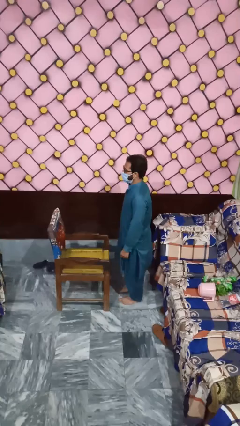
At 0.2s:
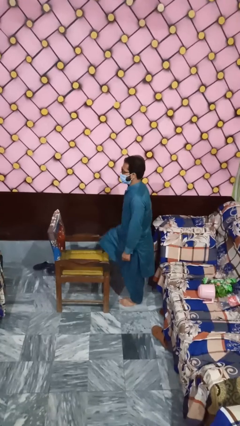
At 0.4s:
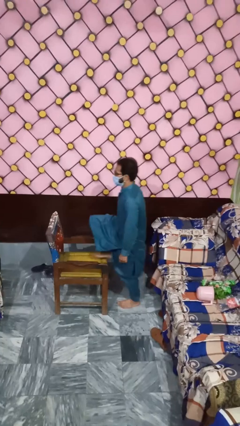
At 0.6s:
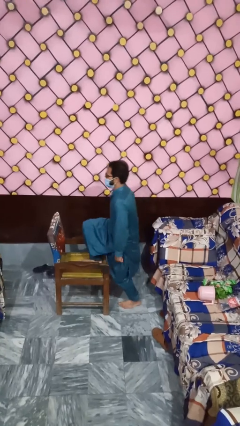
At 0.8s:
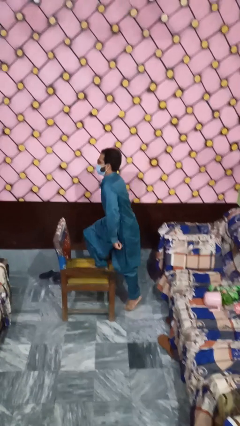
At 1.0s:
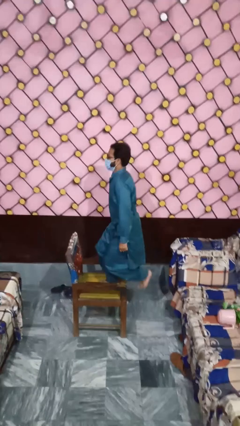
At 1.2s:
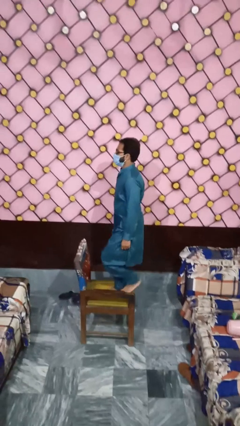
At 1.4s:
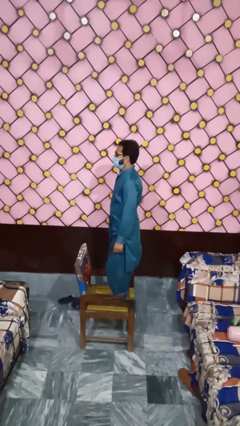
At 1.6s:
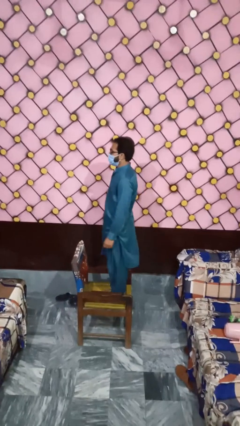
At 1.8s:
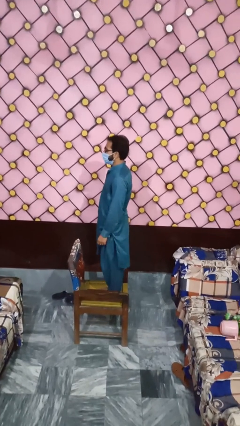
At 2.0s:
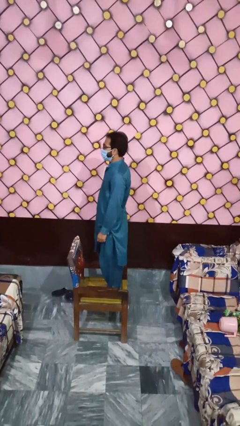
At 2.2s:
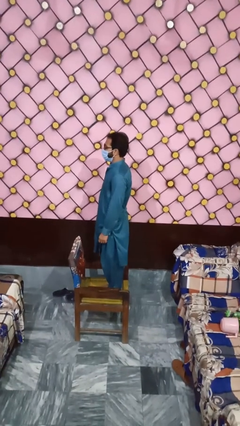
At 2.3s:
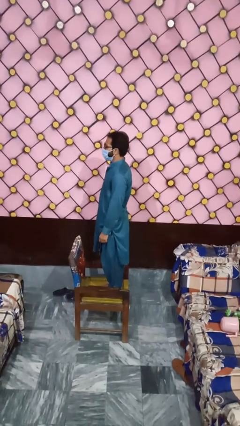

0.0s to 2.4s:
person climbs on chair

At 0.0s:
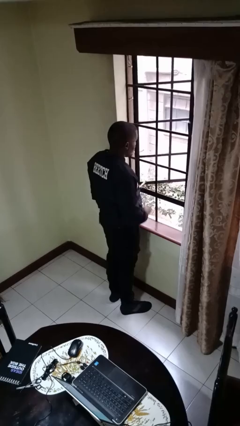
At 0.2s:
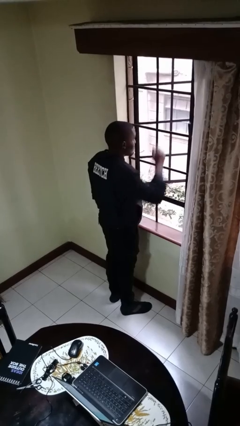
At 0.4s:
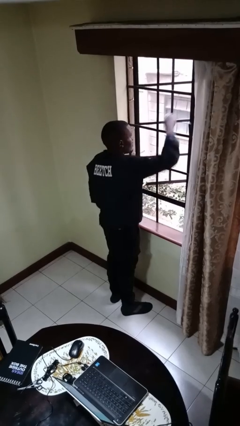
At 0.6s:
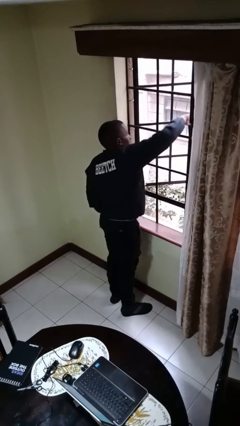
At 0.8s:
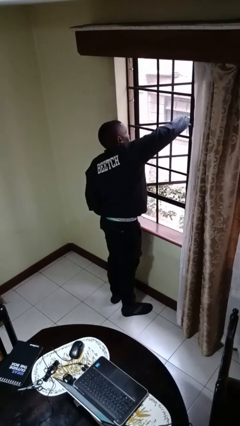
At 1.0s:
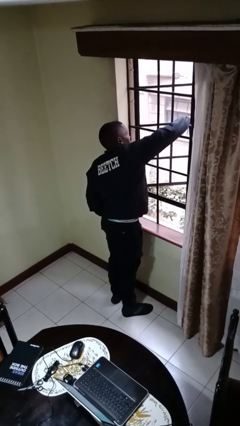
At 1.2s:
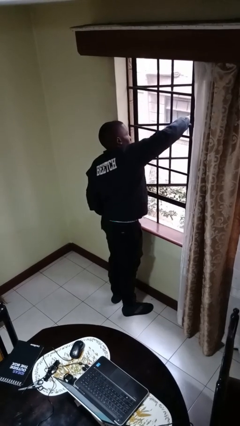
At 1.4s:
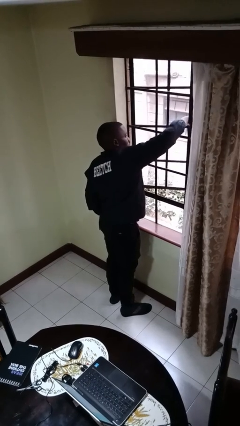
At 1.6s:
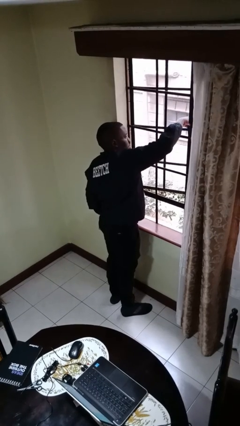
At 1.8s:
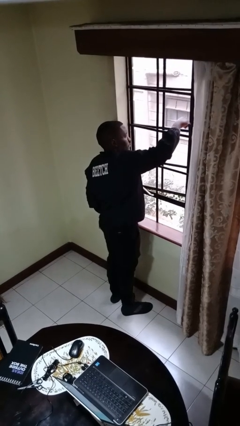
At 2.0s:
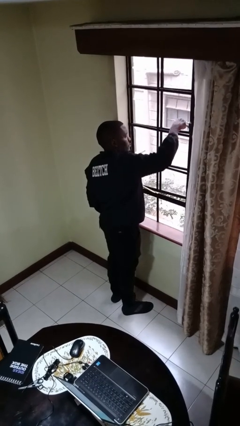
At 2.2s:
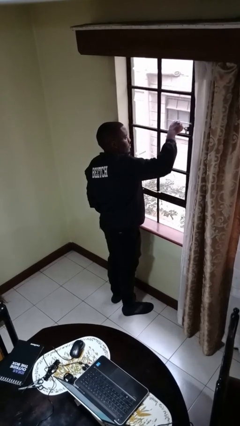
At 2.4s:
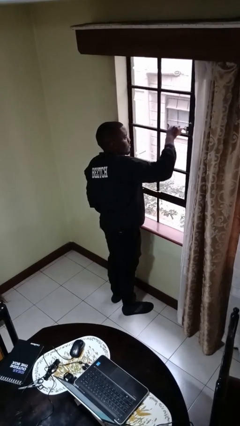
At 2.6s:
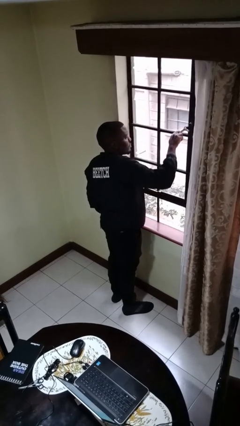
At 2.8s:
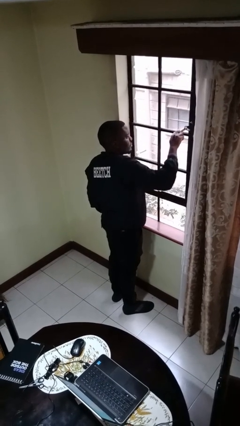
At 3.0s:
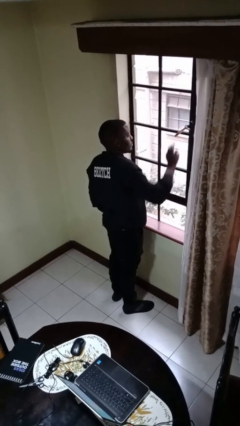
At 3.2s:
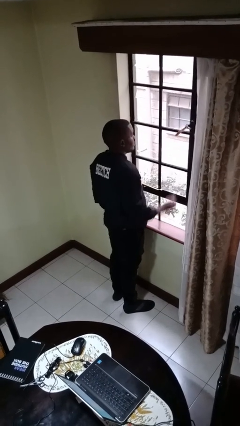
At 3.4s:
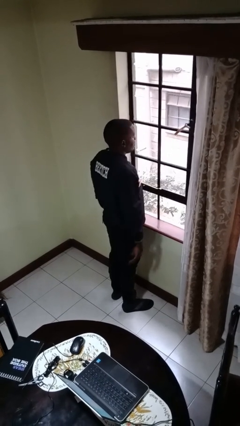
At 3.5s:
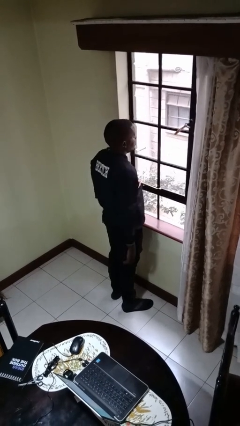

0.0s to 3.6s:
person closes home window

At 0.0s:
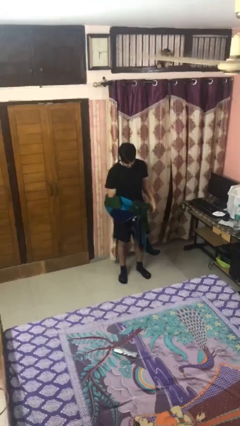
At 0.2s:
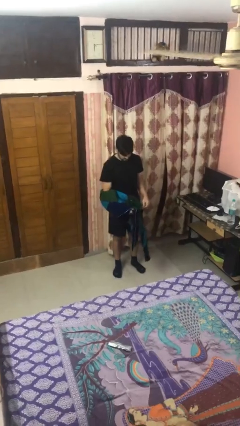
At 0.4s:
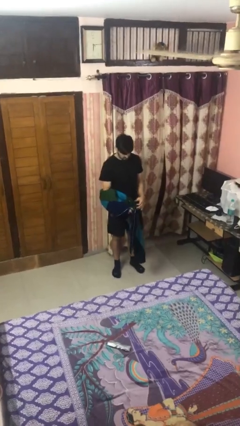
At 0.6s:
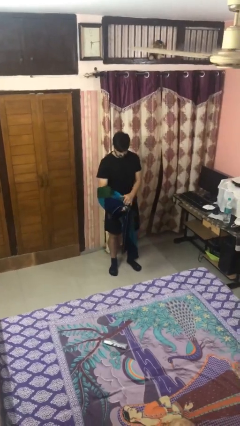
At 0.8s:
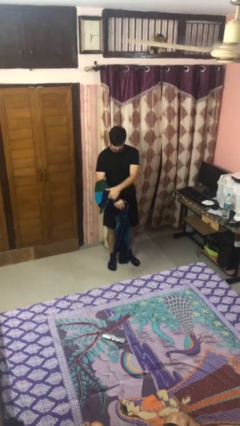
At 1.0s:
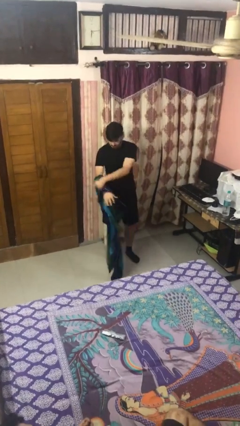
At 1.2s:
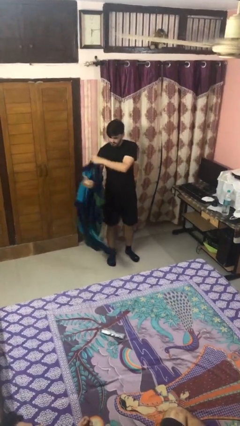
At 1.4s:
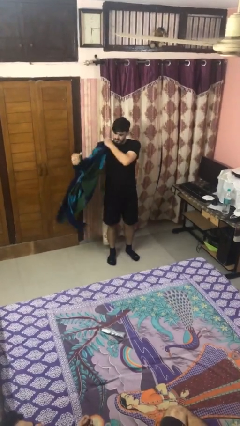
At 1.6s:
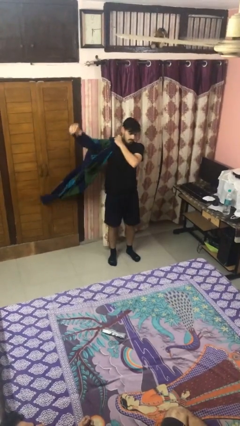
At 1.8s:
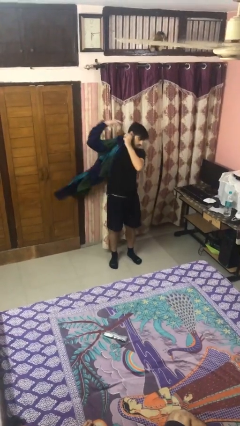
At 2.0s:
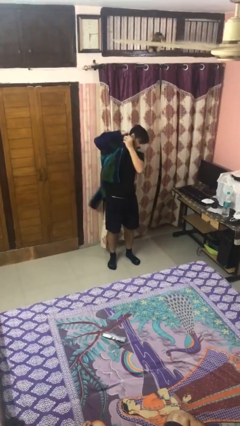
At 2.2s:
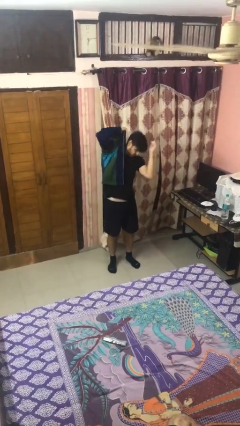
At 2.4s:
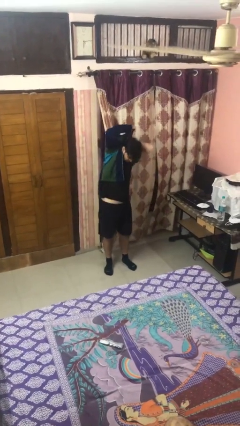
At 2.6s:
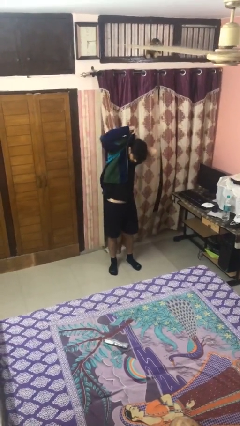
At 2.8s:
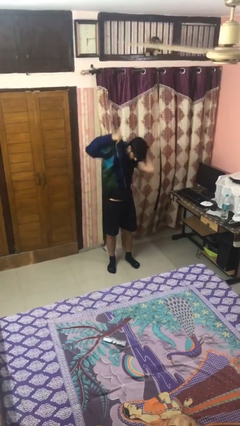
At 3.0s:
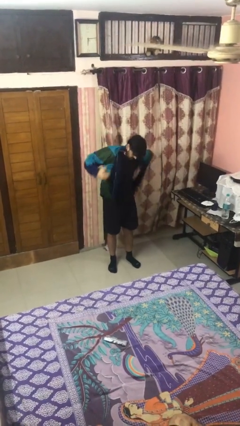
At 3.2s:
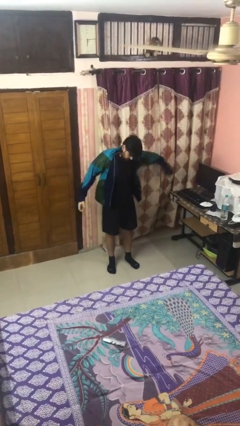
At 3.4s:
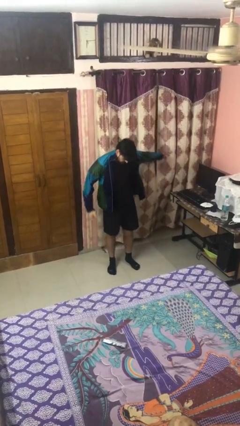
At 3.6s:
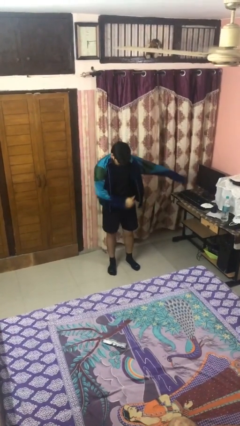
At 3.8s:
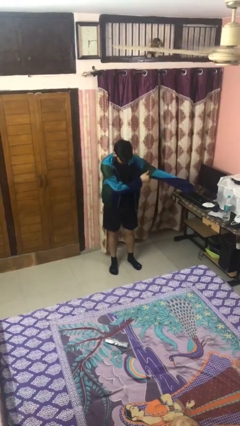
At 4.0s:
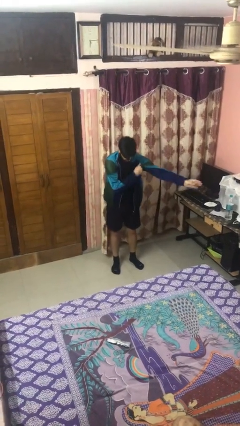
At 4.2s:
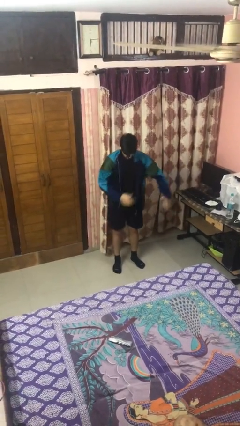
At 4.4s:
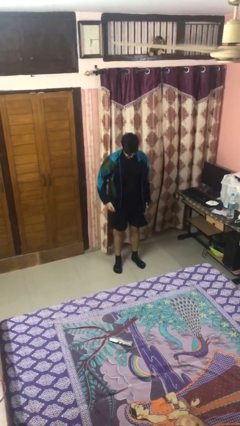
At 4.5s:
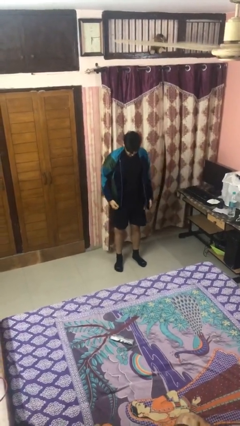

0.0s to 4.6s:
person puts on jacket

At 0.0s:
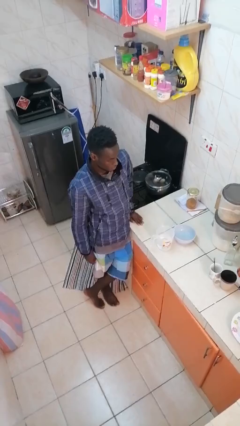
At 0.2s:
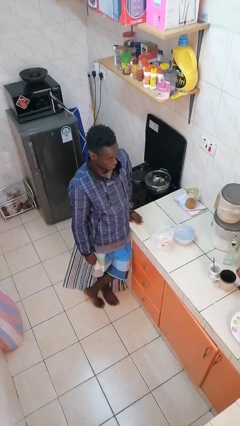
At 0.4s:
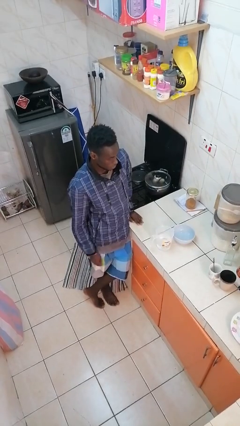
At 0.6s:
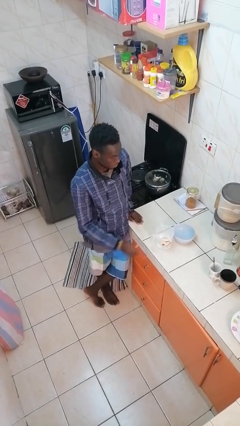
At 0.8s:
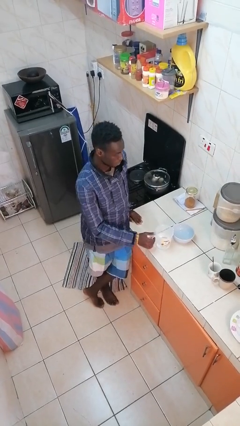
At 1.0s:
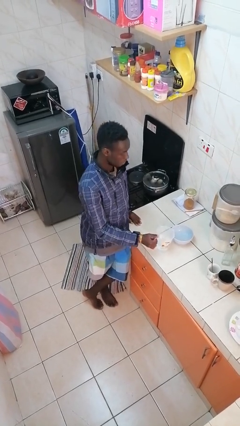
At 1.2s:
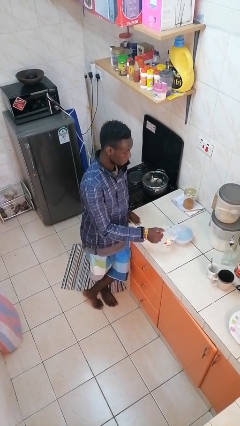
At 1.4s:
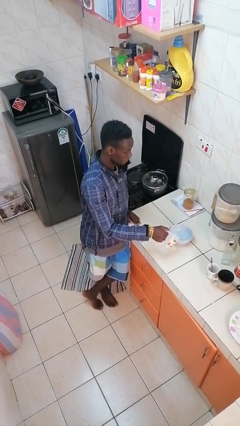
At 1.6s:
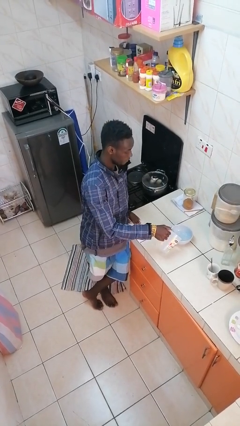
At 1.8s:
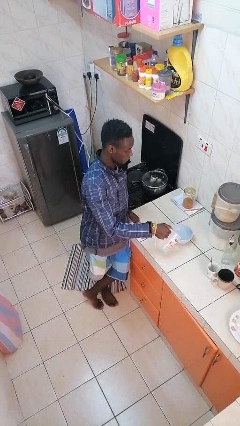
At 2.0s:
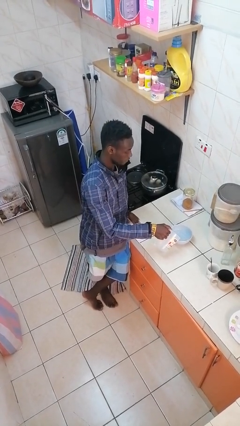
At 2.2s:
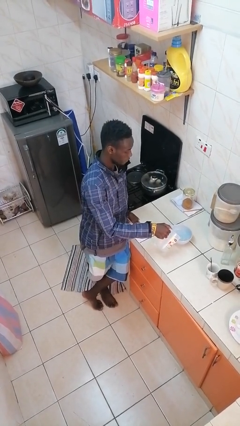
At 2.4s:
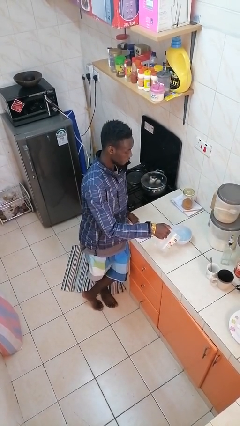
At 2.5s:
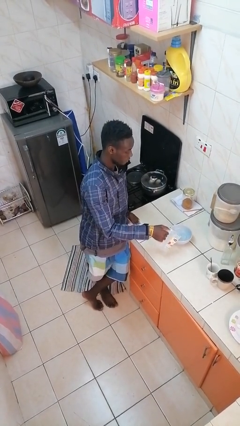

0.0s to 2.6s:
person pours into bowl

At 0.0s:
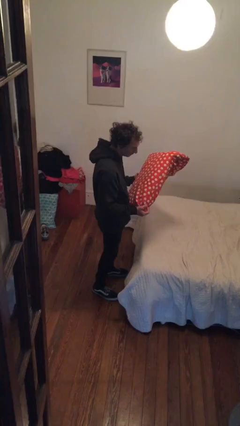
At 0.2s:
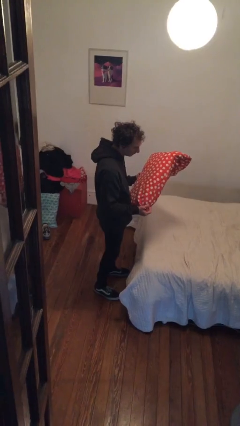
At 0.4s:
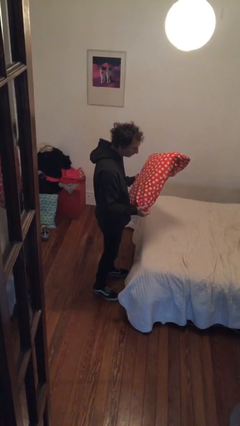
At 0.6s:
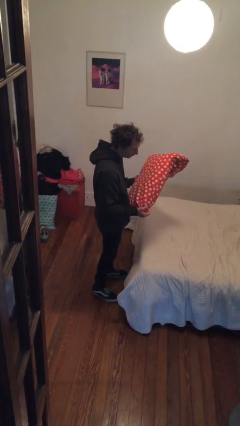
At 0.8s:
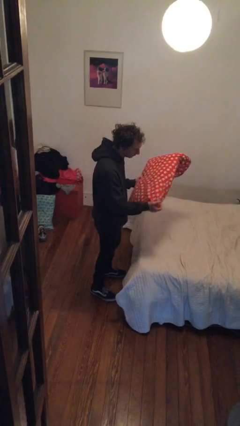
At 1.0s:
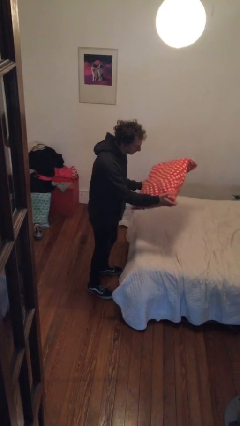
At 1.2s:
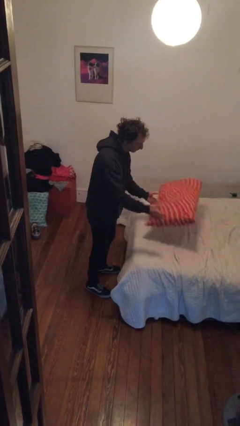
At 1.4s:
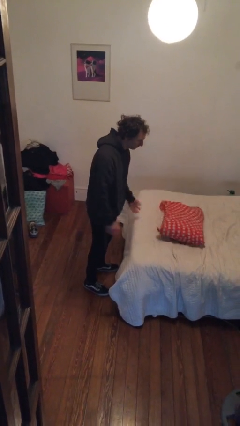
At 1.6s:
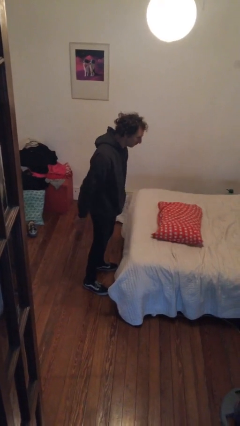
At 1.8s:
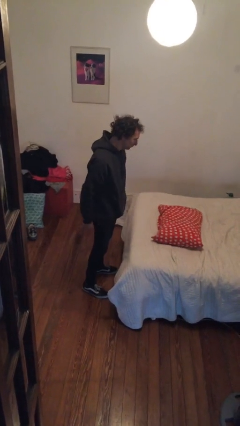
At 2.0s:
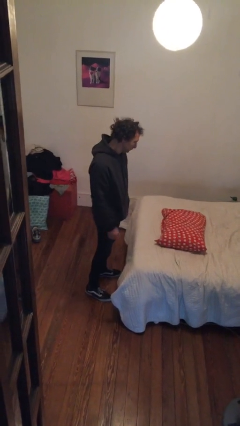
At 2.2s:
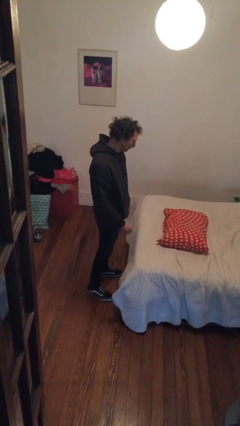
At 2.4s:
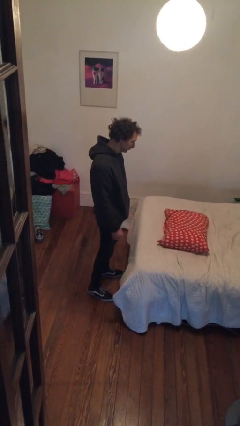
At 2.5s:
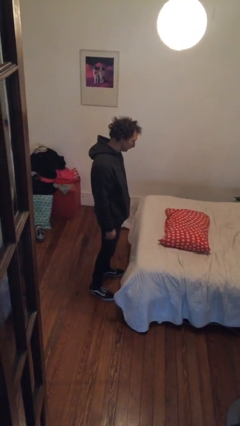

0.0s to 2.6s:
person puts down object on bed

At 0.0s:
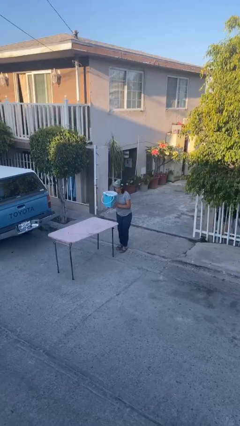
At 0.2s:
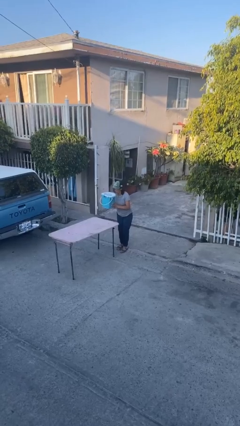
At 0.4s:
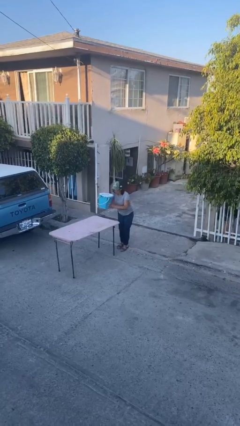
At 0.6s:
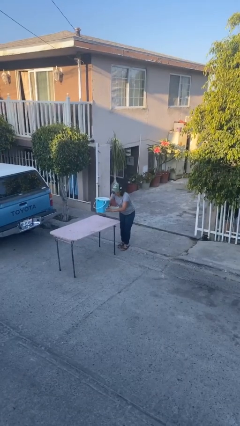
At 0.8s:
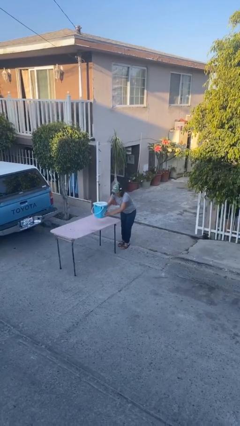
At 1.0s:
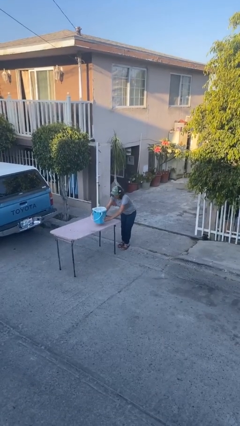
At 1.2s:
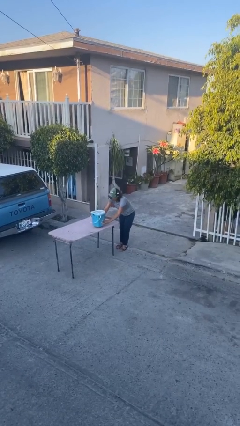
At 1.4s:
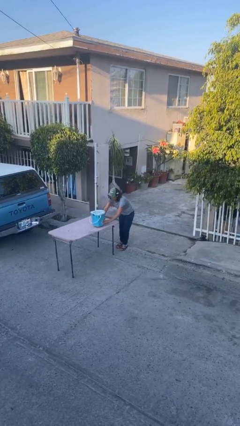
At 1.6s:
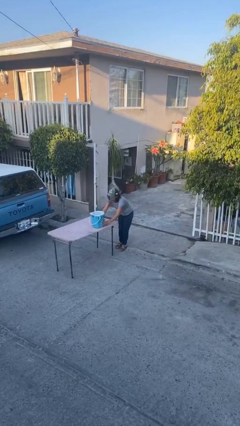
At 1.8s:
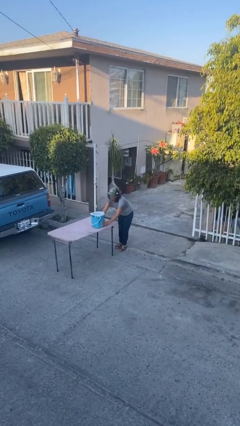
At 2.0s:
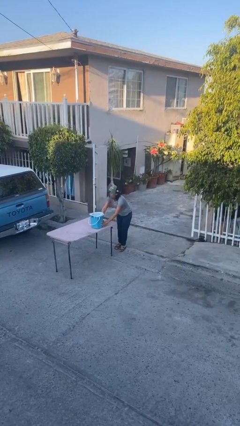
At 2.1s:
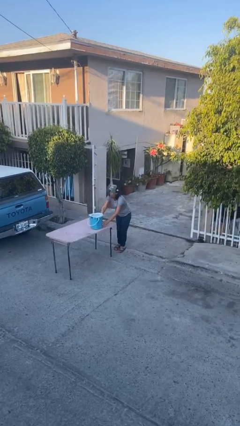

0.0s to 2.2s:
person puts down object on table
